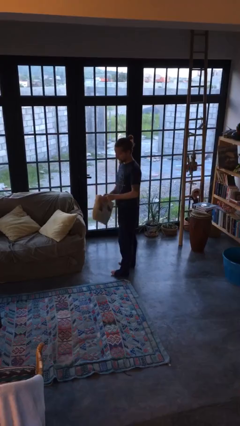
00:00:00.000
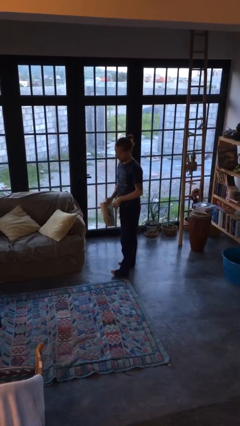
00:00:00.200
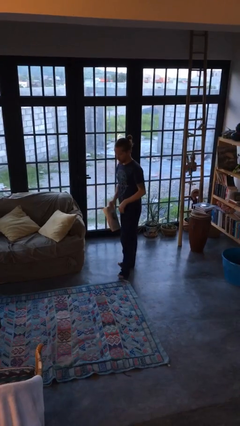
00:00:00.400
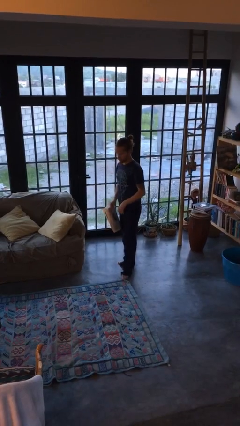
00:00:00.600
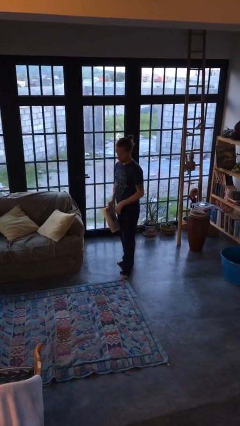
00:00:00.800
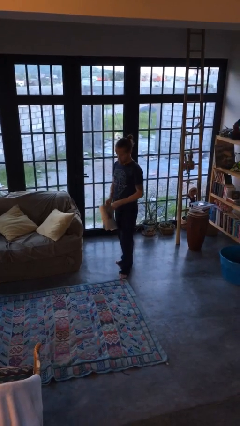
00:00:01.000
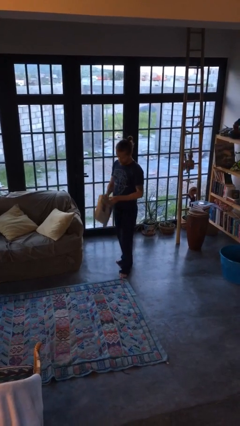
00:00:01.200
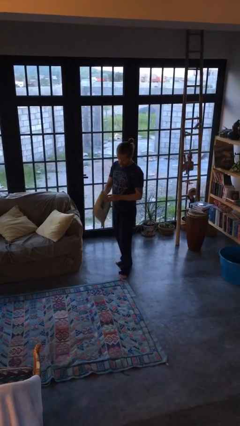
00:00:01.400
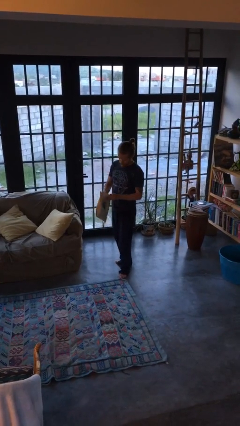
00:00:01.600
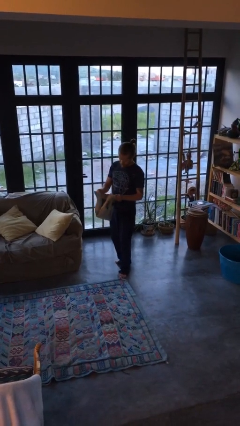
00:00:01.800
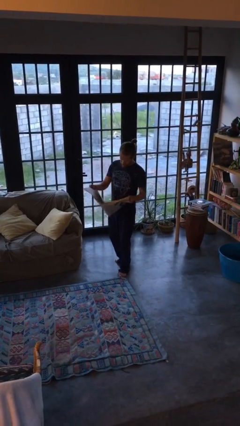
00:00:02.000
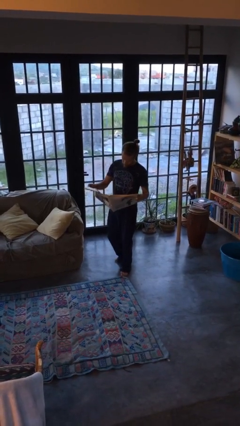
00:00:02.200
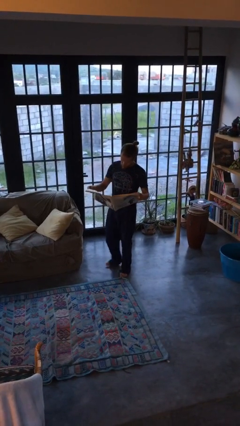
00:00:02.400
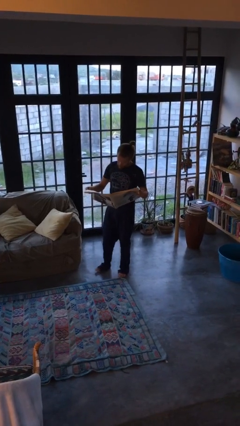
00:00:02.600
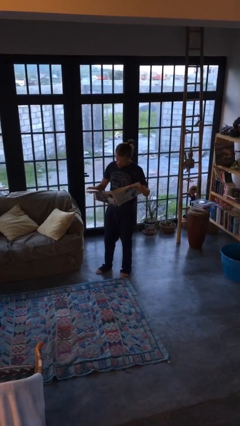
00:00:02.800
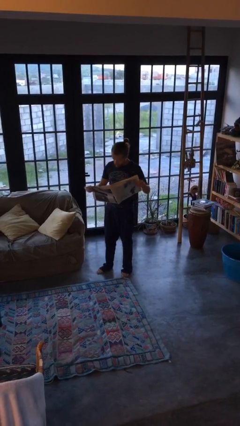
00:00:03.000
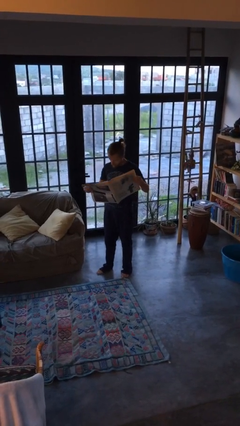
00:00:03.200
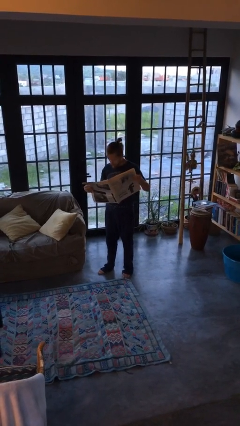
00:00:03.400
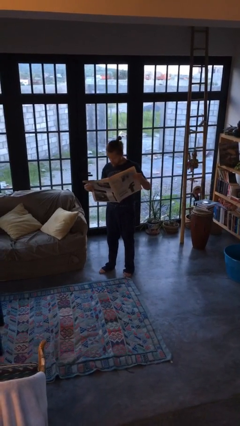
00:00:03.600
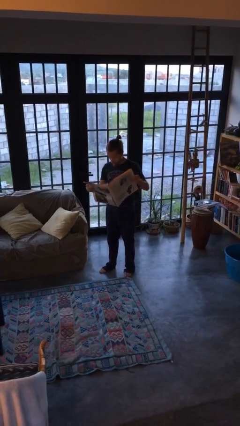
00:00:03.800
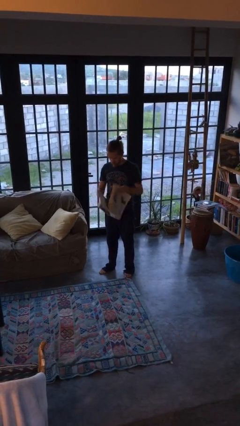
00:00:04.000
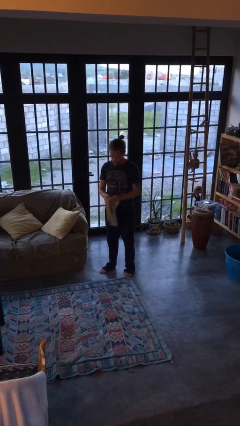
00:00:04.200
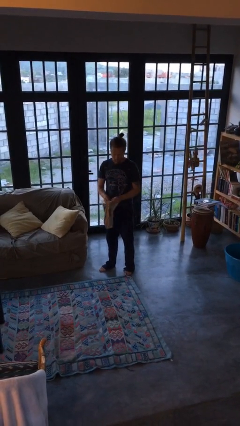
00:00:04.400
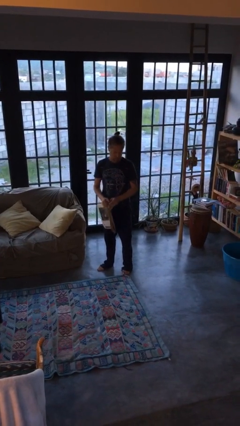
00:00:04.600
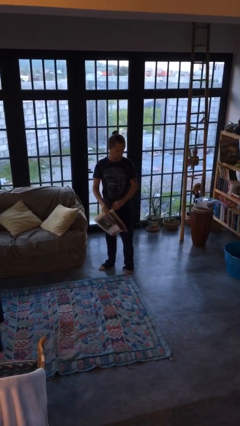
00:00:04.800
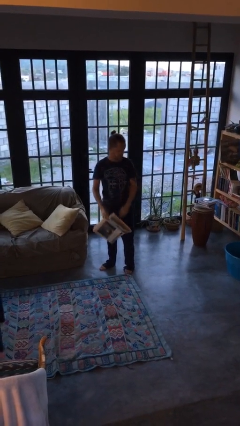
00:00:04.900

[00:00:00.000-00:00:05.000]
person reads newspaper

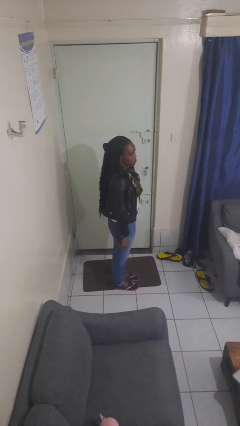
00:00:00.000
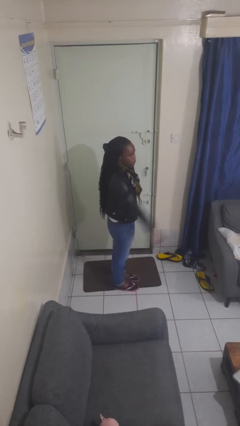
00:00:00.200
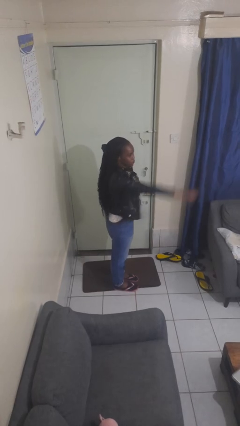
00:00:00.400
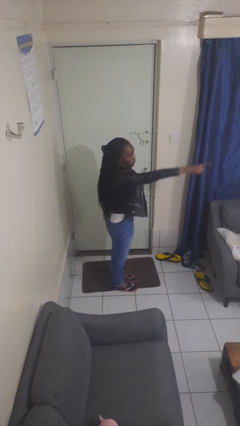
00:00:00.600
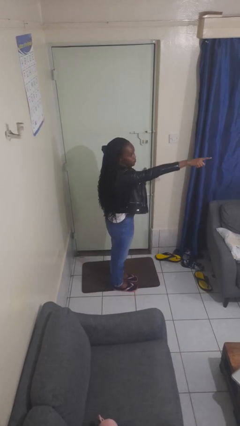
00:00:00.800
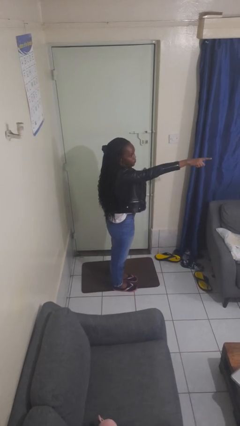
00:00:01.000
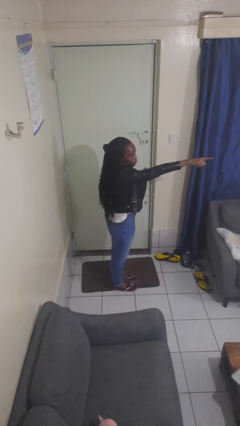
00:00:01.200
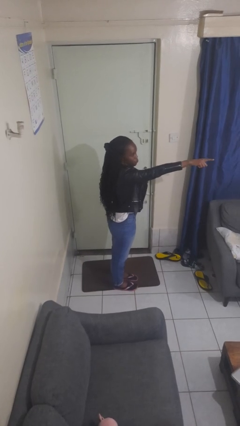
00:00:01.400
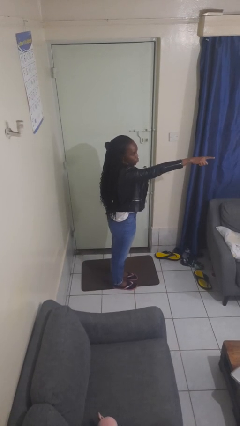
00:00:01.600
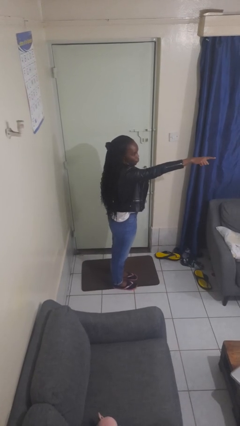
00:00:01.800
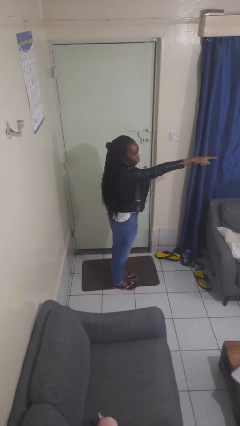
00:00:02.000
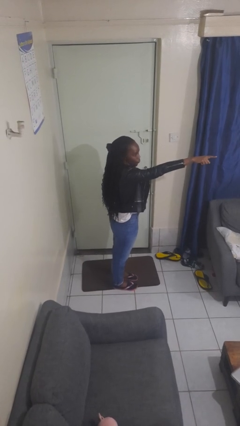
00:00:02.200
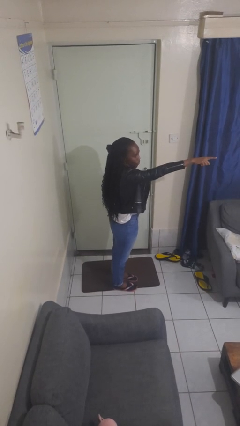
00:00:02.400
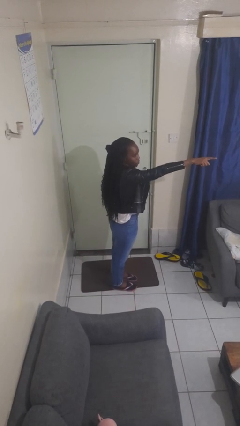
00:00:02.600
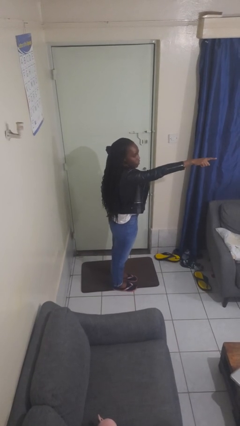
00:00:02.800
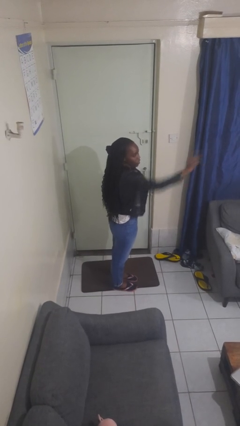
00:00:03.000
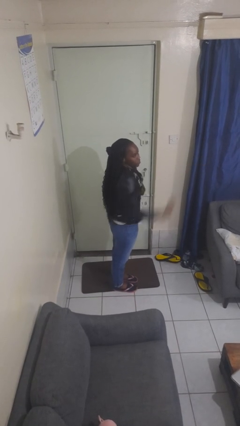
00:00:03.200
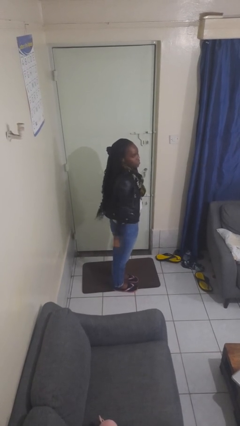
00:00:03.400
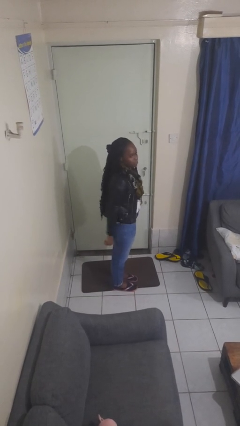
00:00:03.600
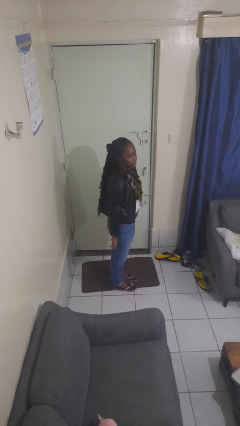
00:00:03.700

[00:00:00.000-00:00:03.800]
person points at person

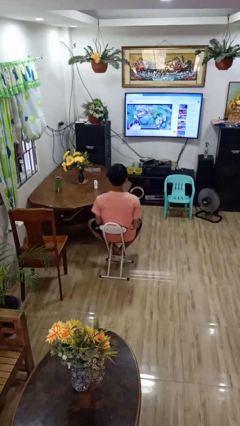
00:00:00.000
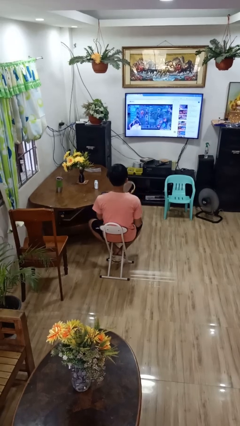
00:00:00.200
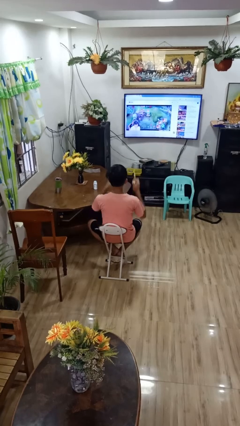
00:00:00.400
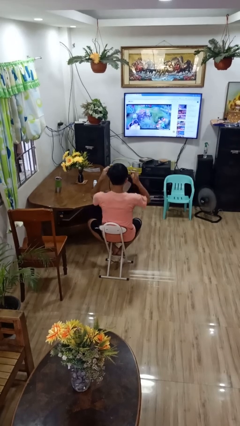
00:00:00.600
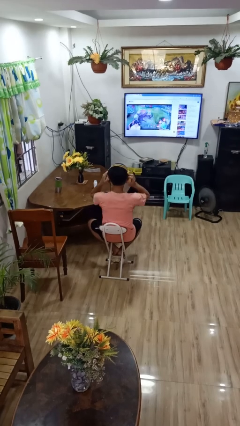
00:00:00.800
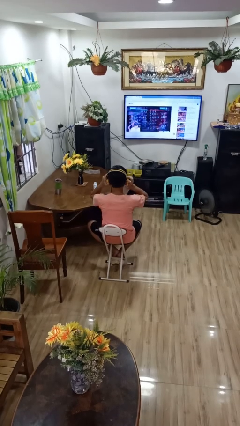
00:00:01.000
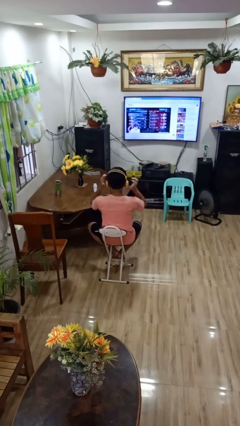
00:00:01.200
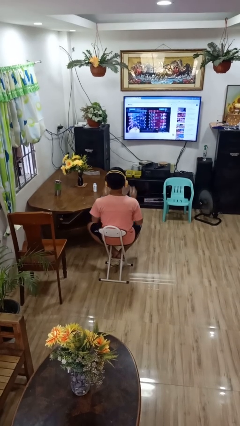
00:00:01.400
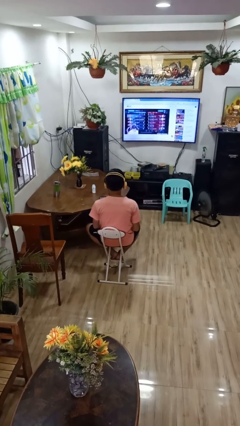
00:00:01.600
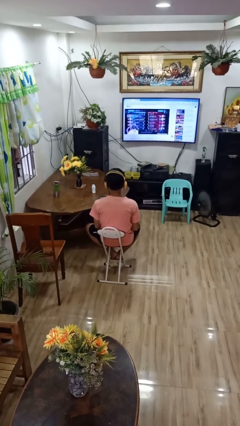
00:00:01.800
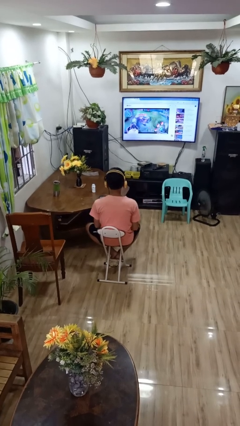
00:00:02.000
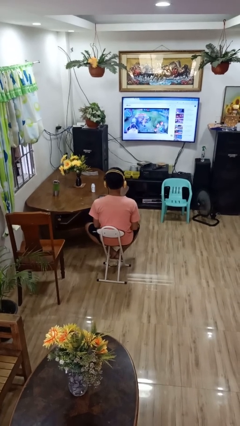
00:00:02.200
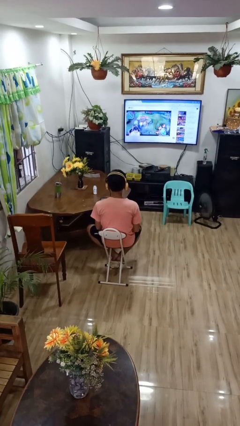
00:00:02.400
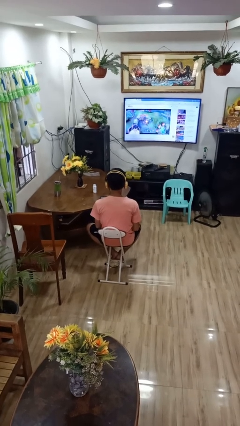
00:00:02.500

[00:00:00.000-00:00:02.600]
person puts on headphones

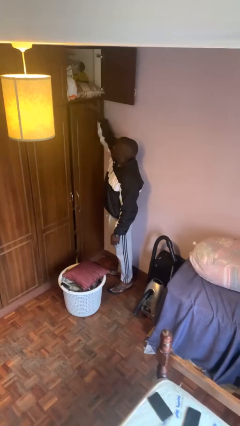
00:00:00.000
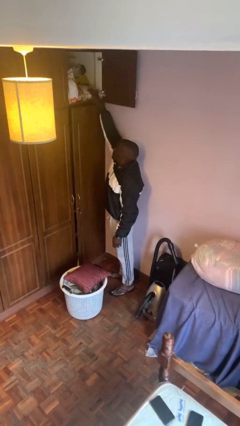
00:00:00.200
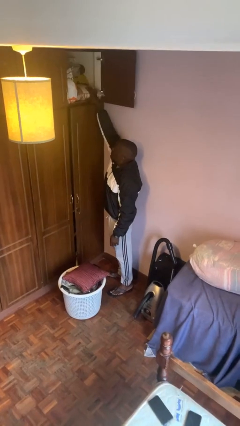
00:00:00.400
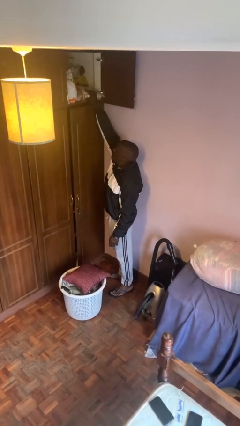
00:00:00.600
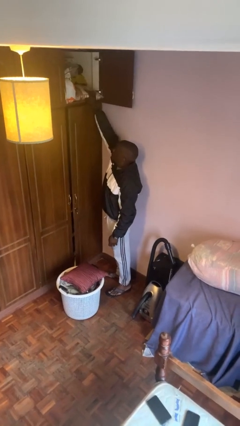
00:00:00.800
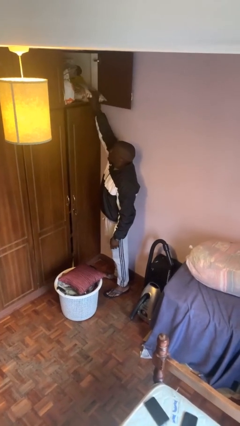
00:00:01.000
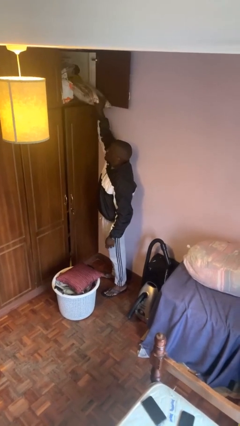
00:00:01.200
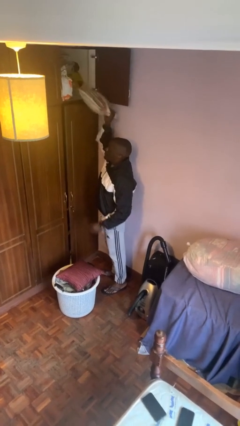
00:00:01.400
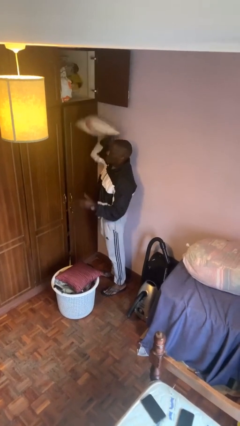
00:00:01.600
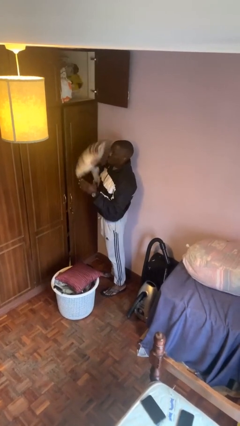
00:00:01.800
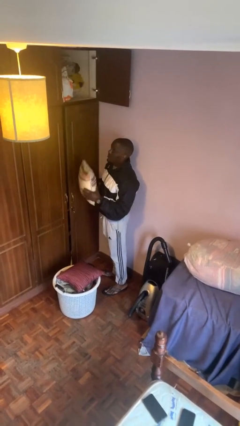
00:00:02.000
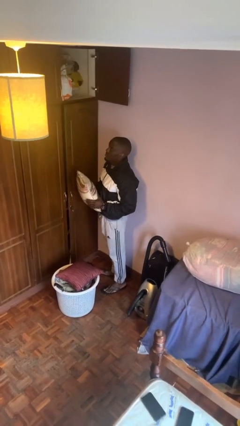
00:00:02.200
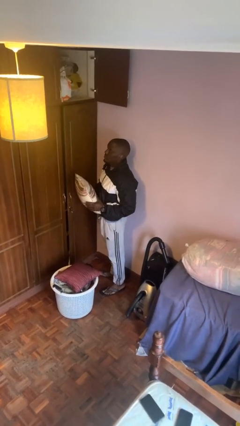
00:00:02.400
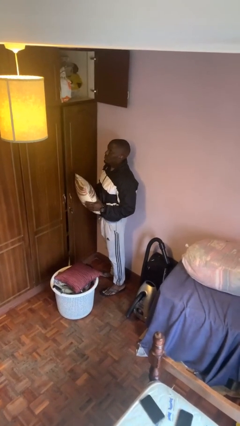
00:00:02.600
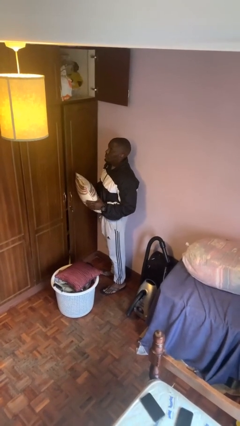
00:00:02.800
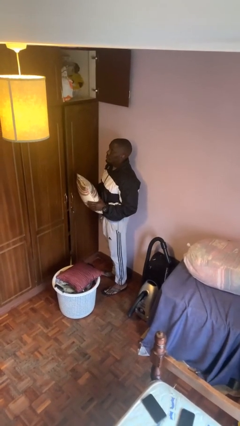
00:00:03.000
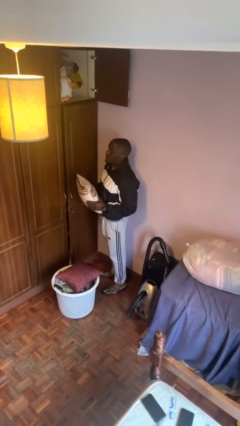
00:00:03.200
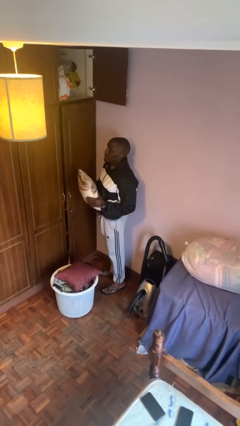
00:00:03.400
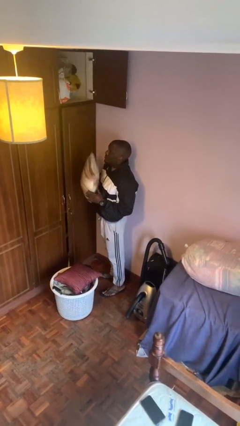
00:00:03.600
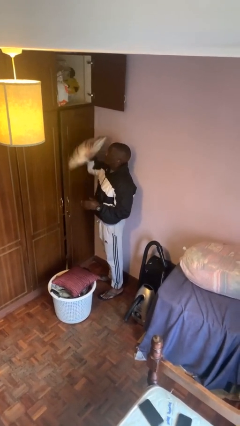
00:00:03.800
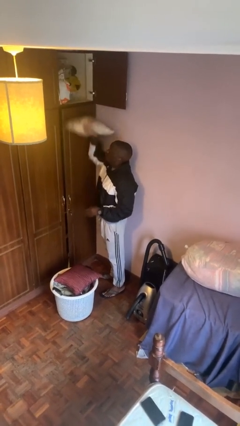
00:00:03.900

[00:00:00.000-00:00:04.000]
person picks up object from shelf

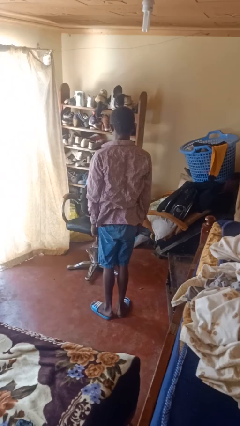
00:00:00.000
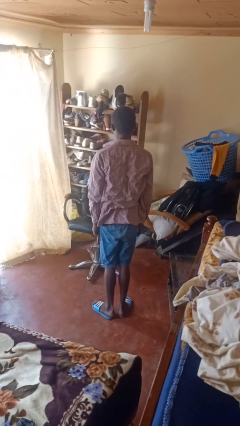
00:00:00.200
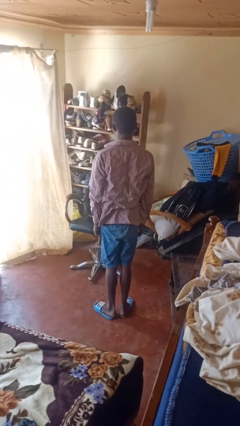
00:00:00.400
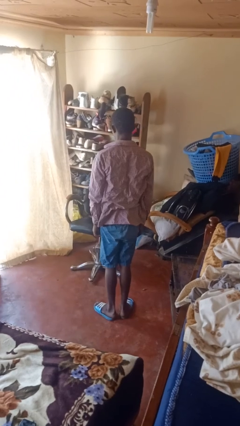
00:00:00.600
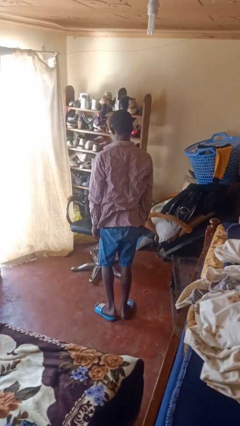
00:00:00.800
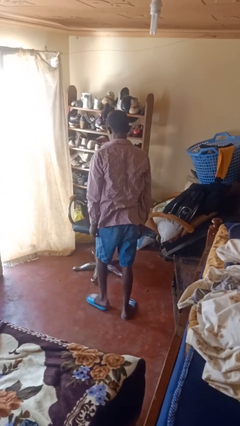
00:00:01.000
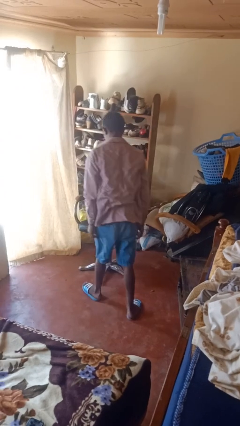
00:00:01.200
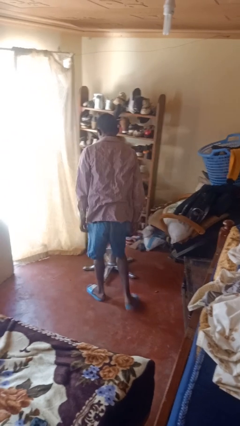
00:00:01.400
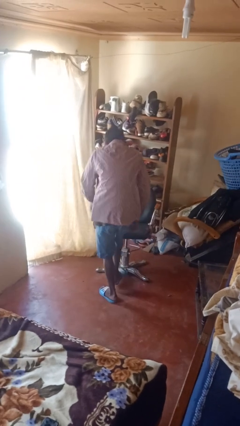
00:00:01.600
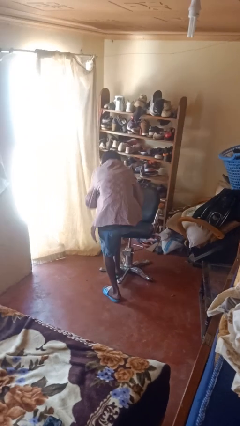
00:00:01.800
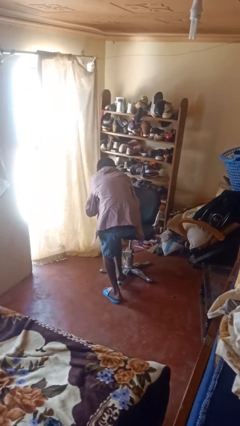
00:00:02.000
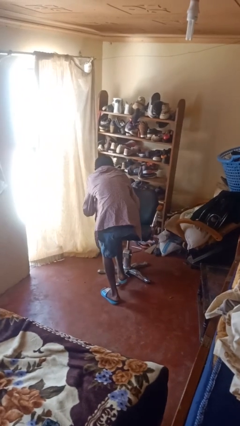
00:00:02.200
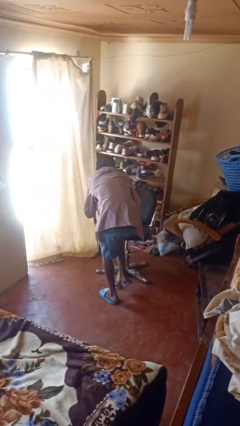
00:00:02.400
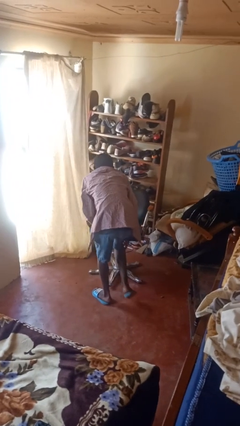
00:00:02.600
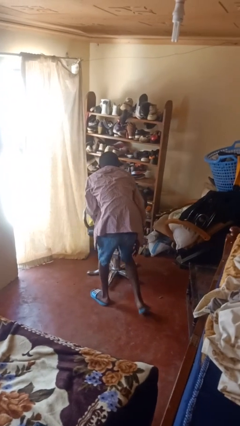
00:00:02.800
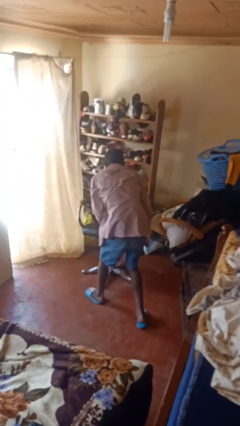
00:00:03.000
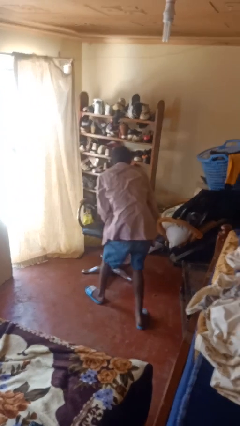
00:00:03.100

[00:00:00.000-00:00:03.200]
person stubs toe
